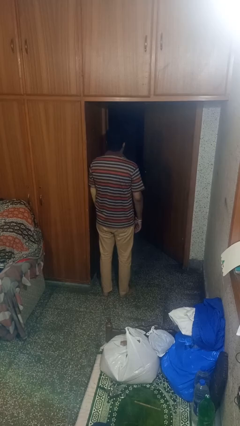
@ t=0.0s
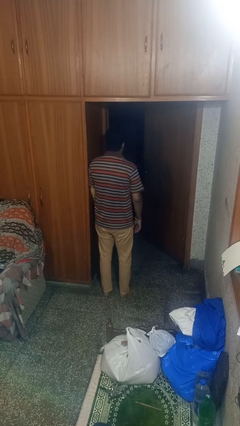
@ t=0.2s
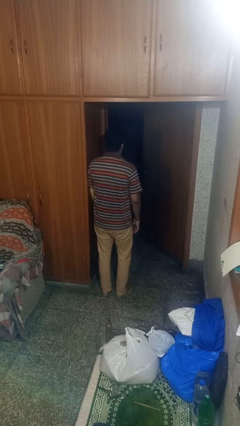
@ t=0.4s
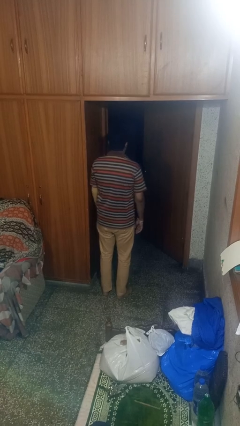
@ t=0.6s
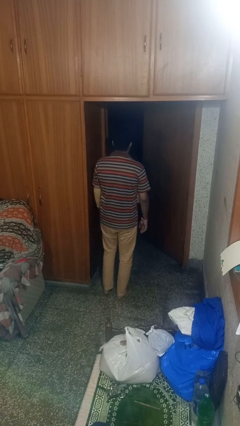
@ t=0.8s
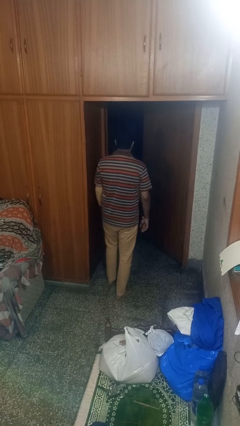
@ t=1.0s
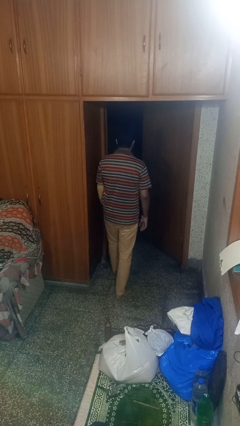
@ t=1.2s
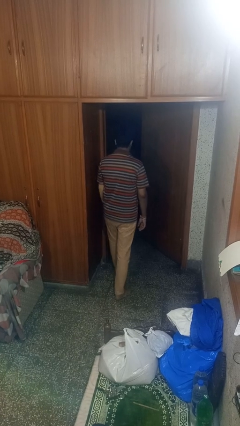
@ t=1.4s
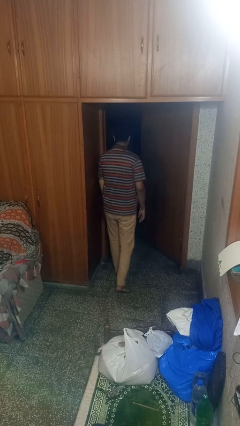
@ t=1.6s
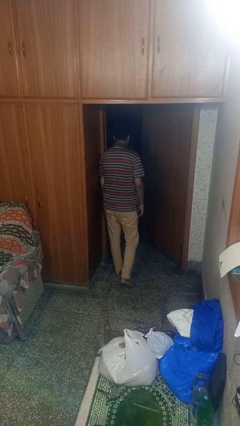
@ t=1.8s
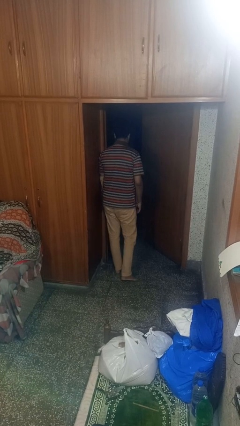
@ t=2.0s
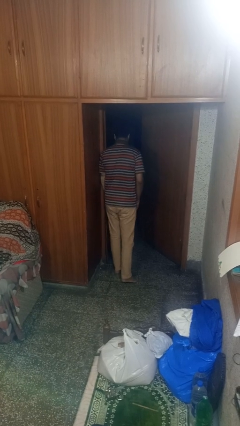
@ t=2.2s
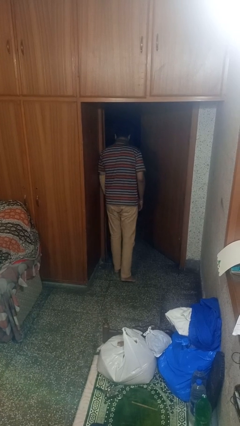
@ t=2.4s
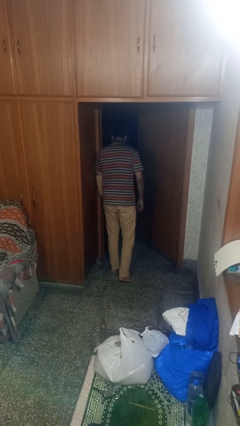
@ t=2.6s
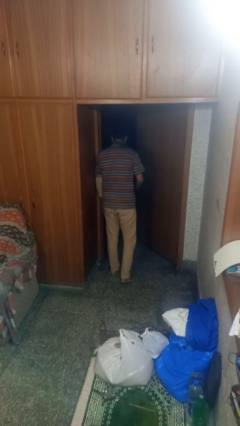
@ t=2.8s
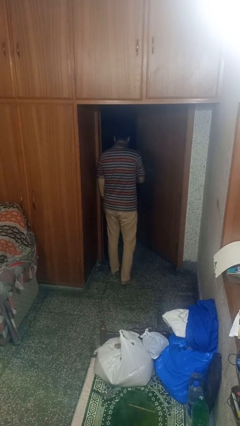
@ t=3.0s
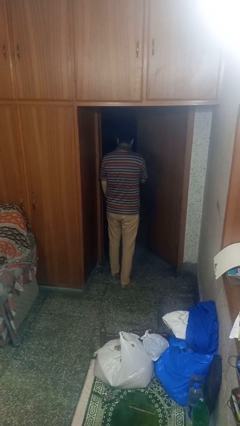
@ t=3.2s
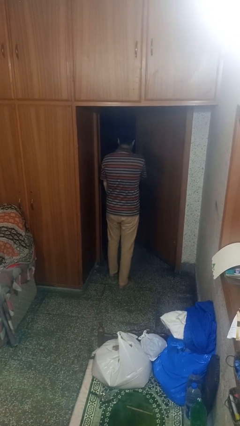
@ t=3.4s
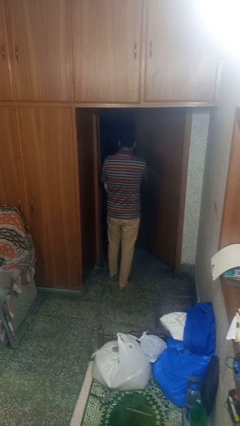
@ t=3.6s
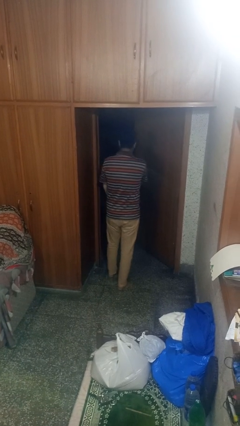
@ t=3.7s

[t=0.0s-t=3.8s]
person bumps into wall

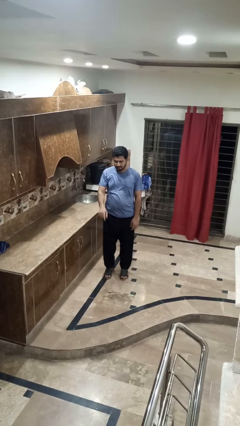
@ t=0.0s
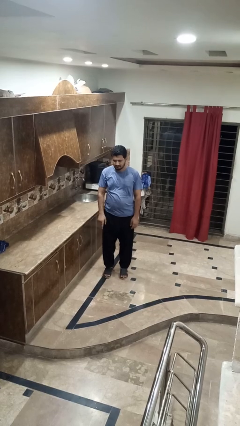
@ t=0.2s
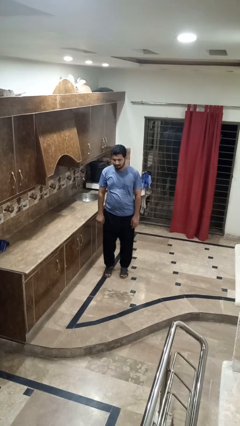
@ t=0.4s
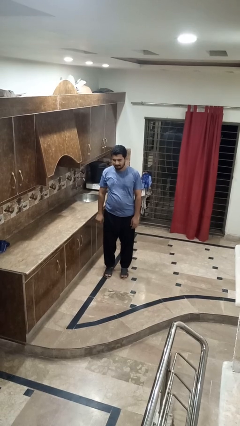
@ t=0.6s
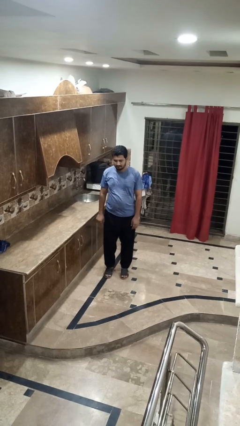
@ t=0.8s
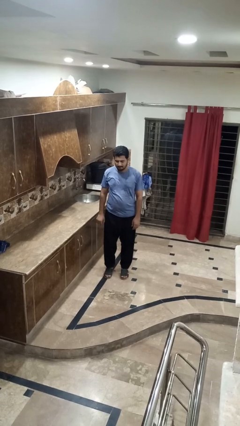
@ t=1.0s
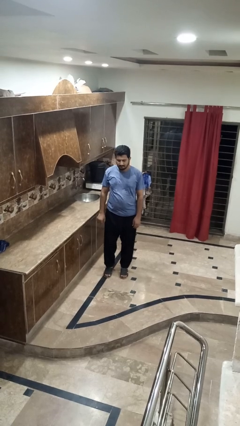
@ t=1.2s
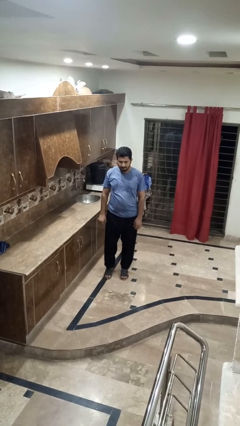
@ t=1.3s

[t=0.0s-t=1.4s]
person gestures swipe down

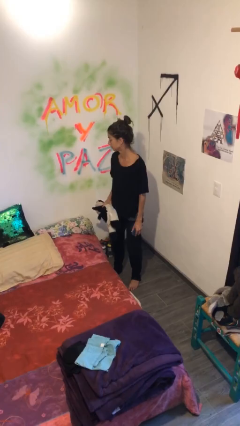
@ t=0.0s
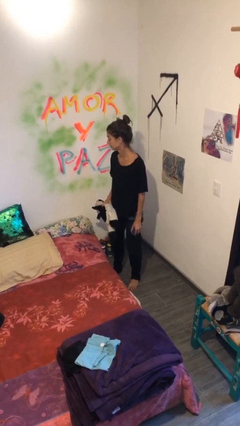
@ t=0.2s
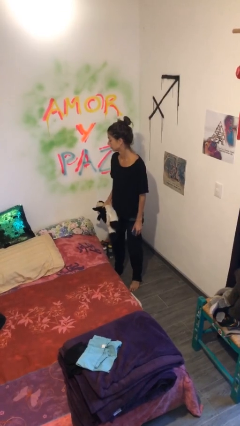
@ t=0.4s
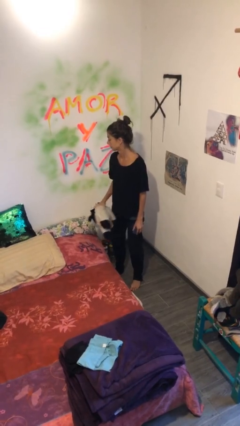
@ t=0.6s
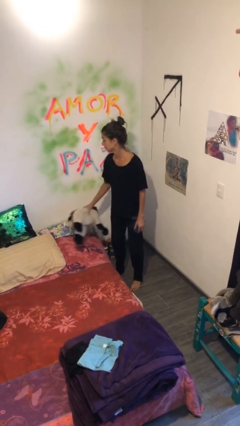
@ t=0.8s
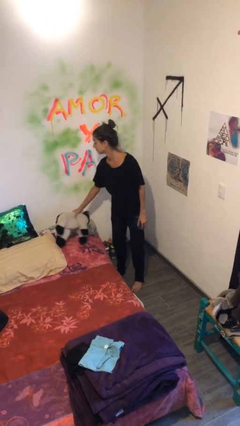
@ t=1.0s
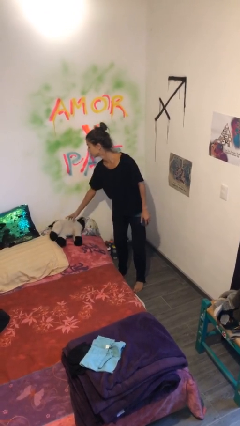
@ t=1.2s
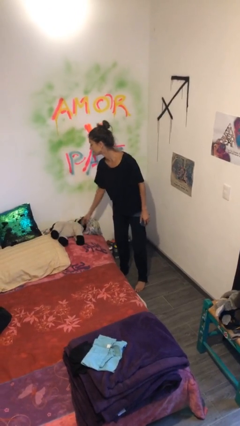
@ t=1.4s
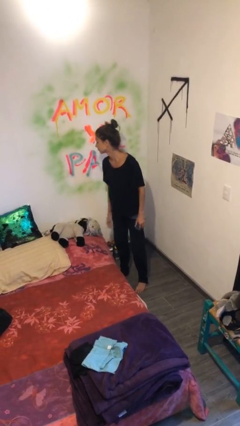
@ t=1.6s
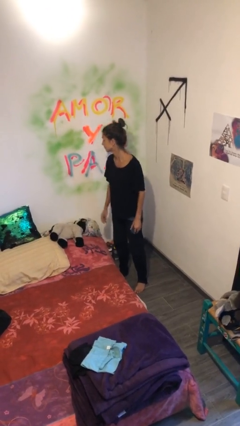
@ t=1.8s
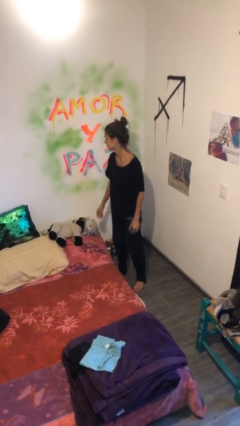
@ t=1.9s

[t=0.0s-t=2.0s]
person puts down object on bed

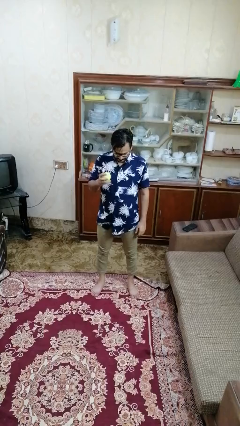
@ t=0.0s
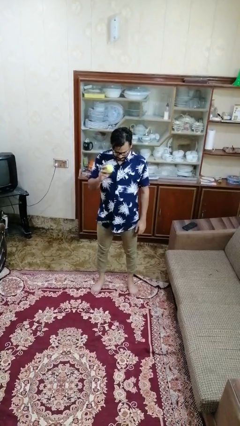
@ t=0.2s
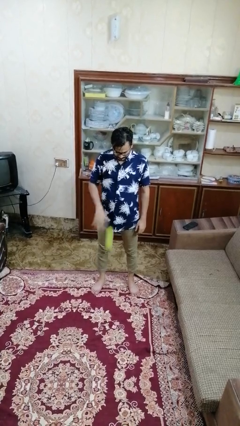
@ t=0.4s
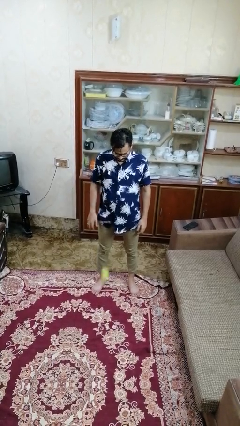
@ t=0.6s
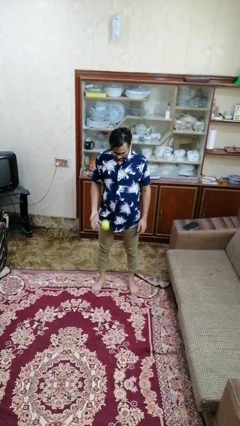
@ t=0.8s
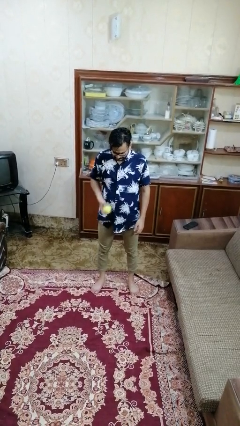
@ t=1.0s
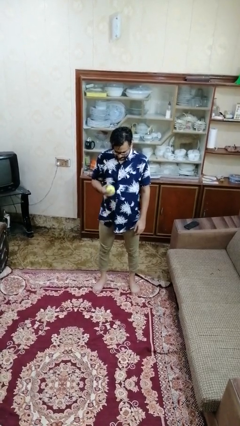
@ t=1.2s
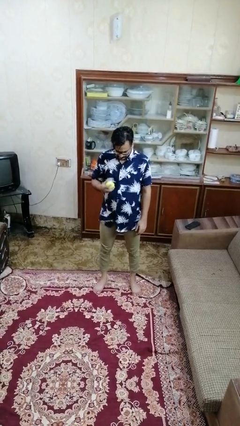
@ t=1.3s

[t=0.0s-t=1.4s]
person bounces ball on floor

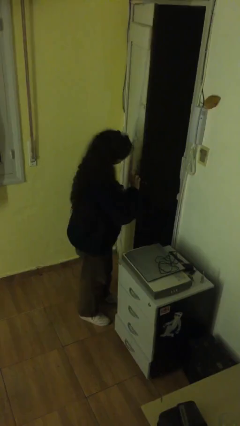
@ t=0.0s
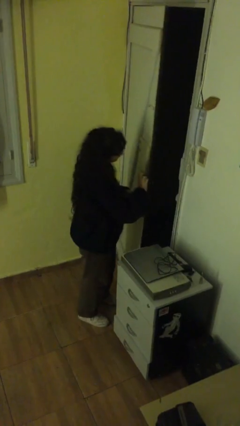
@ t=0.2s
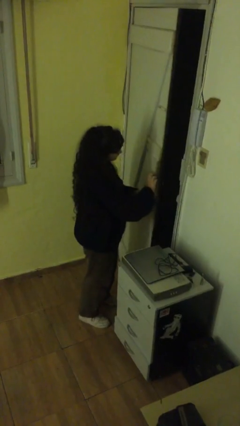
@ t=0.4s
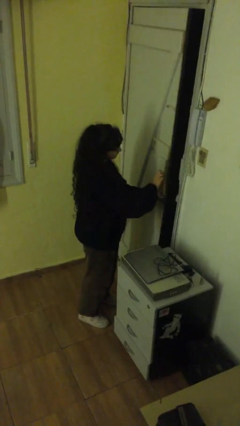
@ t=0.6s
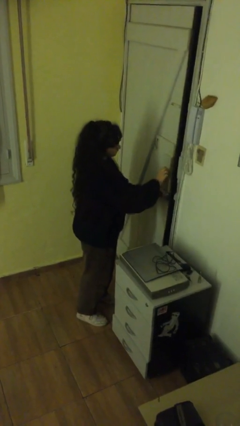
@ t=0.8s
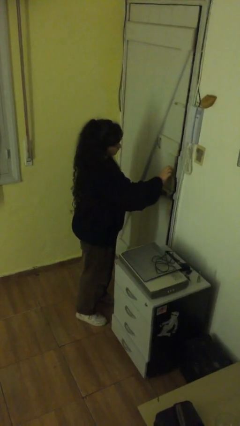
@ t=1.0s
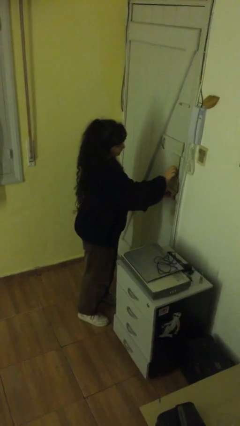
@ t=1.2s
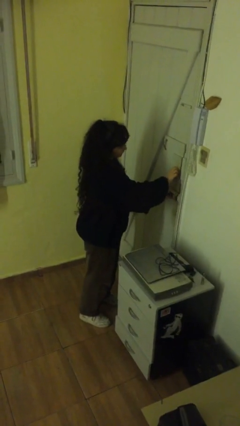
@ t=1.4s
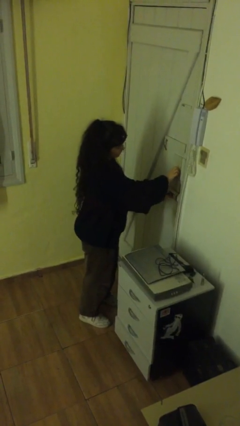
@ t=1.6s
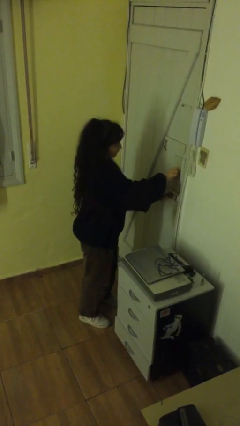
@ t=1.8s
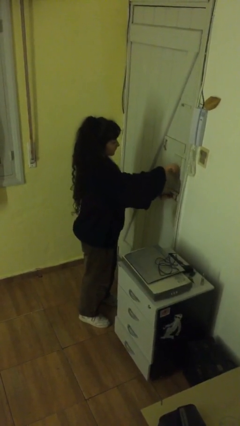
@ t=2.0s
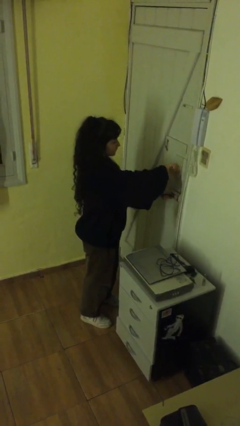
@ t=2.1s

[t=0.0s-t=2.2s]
person closes facility door

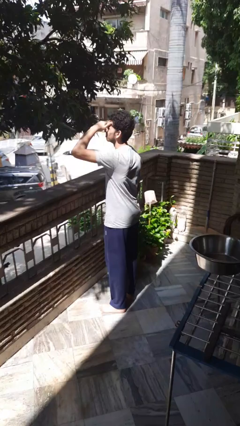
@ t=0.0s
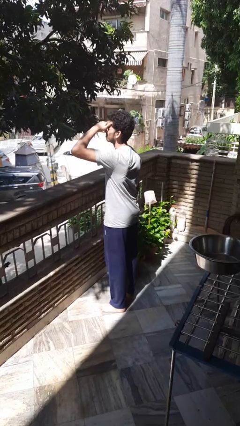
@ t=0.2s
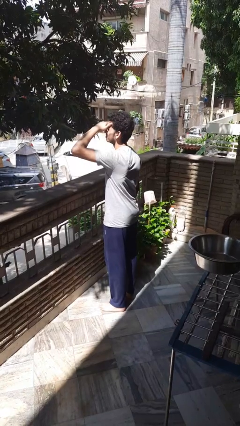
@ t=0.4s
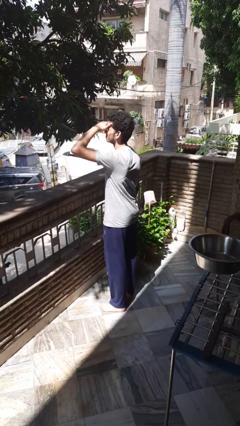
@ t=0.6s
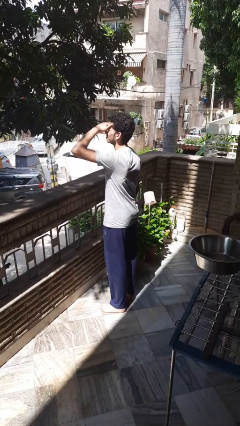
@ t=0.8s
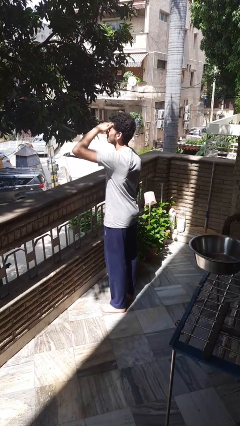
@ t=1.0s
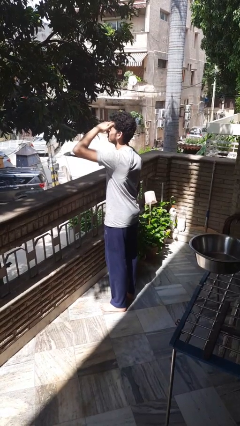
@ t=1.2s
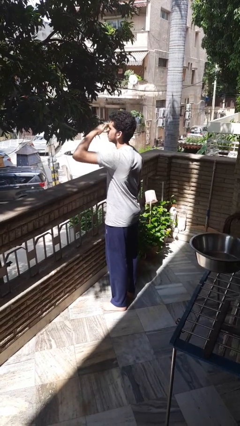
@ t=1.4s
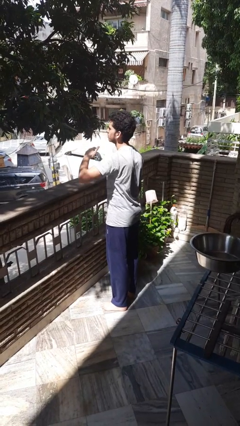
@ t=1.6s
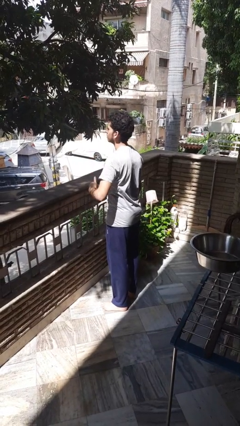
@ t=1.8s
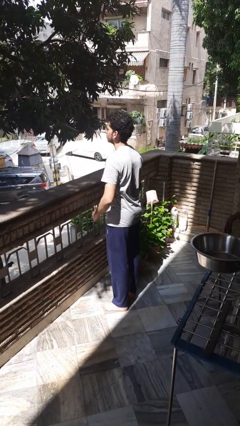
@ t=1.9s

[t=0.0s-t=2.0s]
person shades eyes

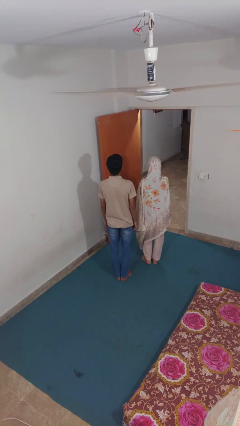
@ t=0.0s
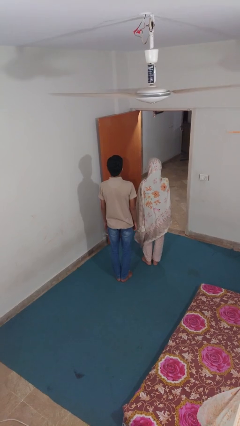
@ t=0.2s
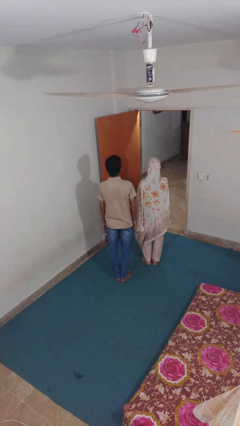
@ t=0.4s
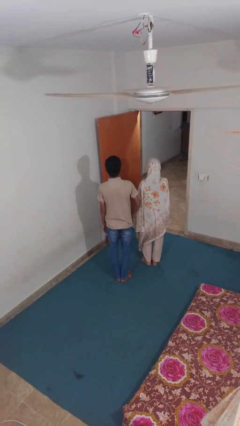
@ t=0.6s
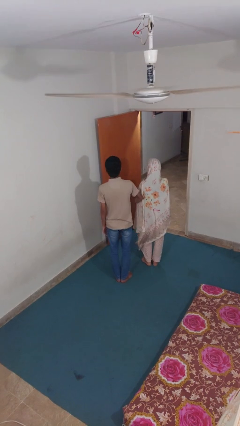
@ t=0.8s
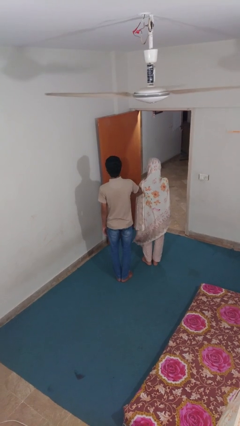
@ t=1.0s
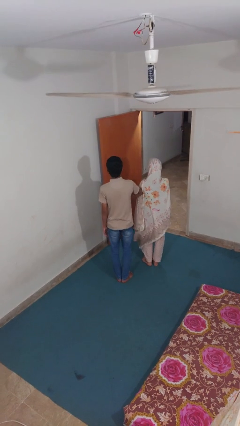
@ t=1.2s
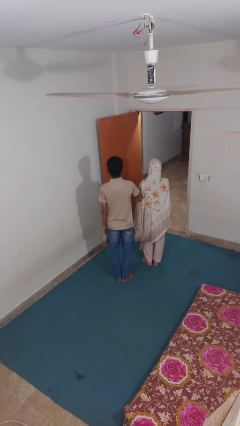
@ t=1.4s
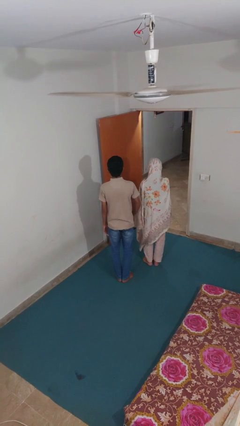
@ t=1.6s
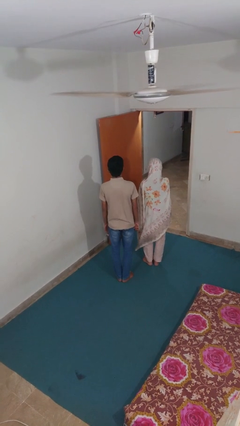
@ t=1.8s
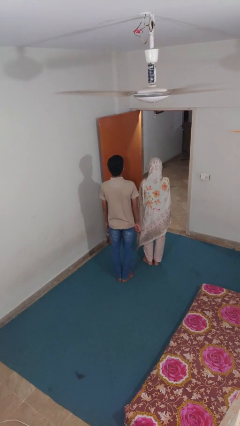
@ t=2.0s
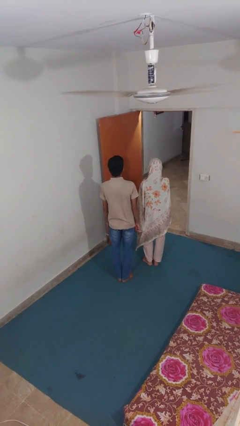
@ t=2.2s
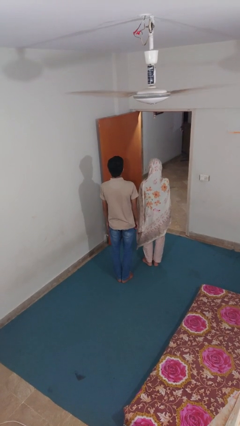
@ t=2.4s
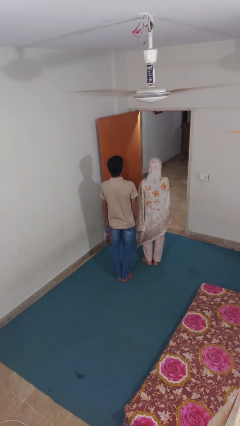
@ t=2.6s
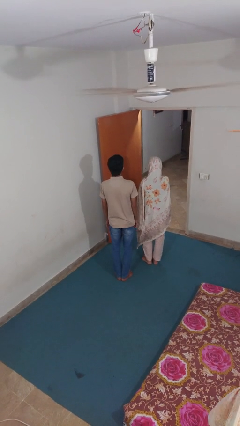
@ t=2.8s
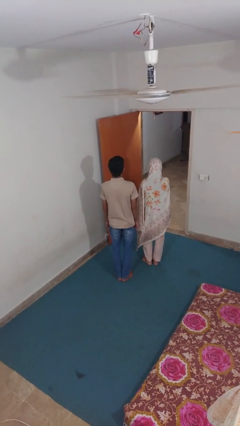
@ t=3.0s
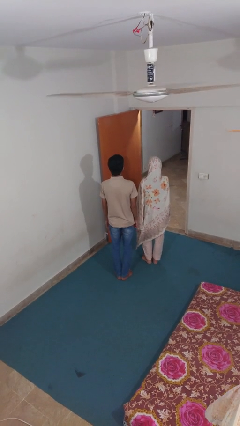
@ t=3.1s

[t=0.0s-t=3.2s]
person nudges person with elbow

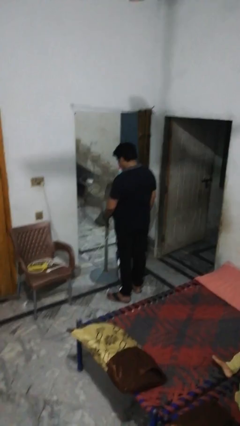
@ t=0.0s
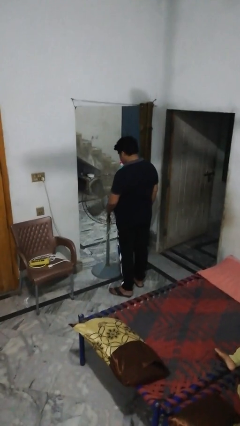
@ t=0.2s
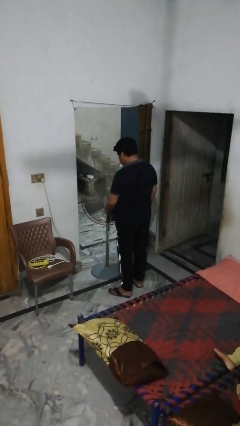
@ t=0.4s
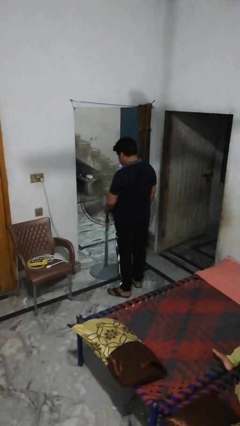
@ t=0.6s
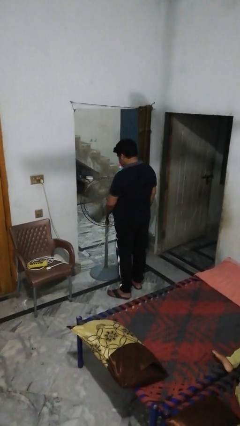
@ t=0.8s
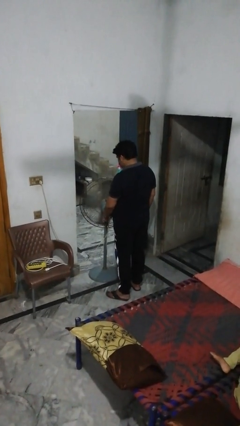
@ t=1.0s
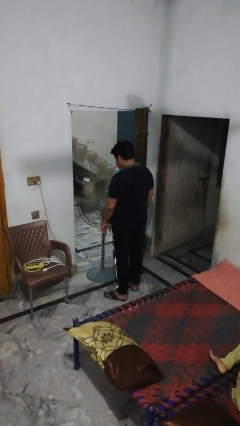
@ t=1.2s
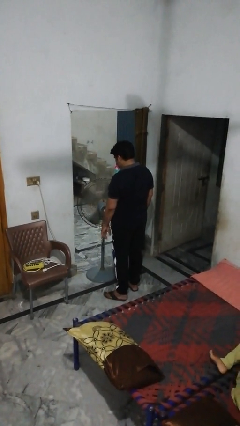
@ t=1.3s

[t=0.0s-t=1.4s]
person turns on fan
